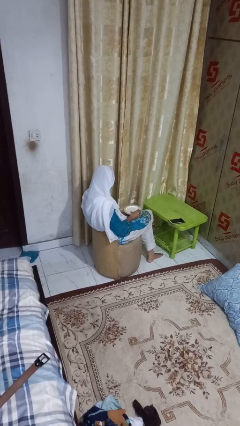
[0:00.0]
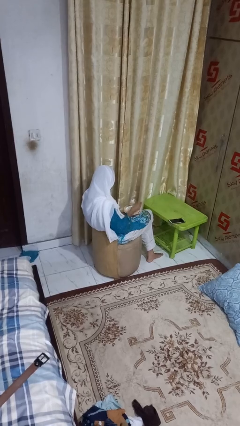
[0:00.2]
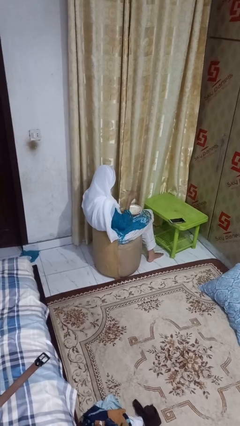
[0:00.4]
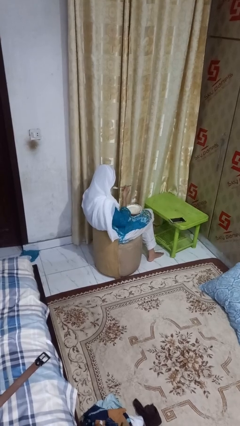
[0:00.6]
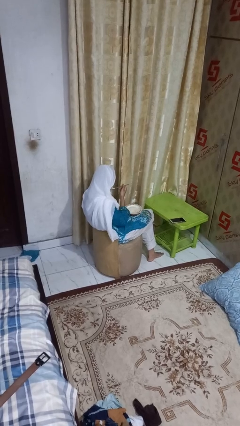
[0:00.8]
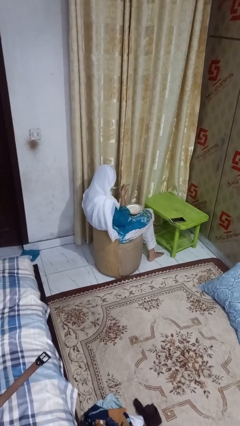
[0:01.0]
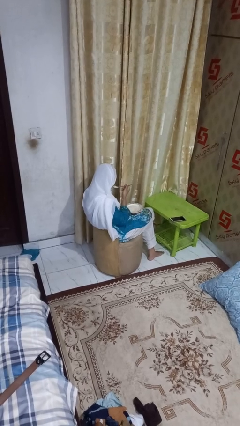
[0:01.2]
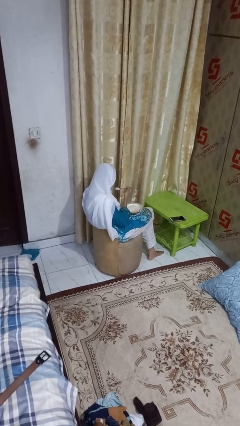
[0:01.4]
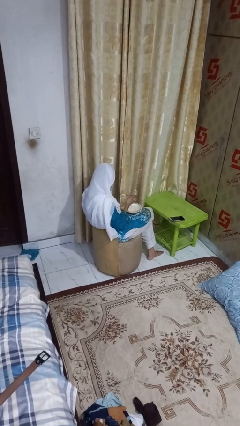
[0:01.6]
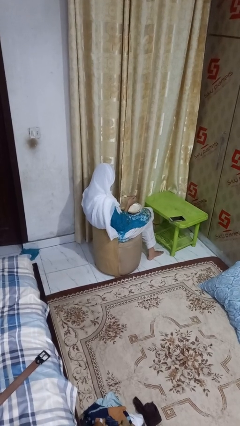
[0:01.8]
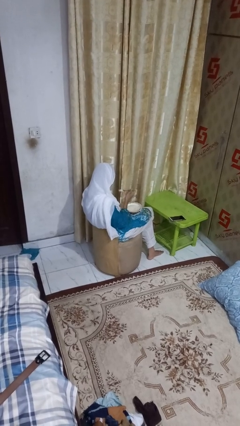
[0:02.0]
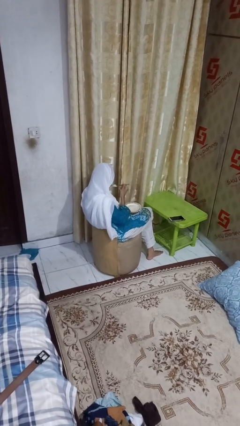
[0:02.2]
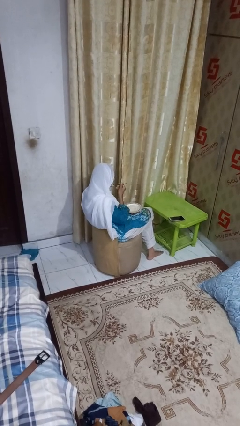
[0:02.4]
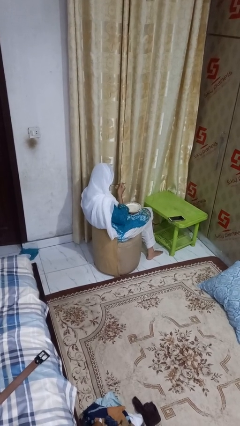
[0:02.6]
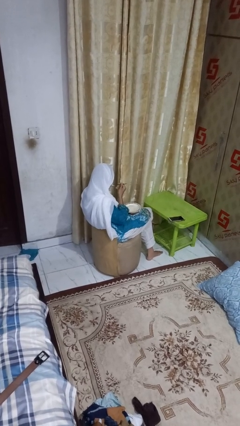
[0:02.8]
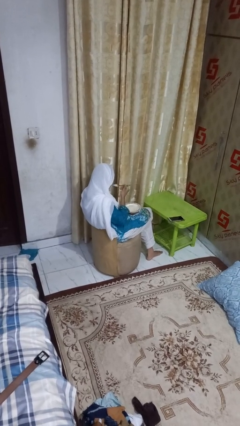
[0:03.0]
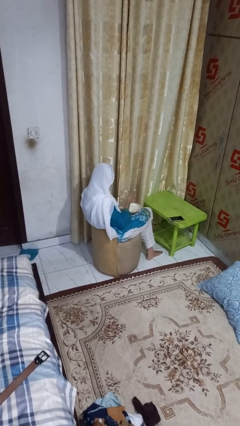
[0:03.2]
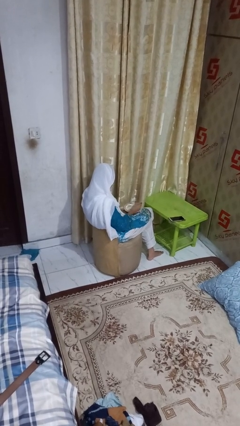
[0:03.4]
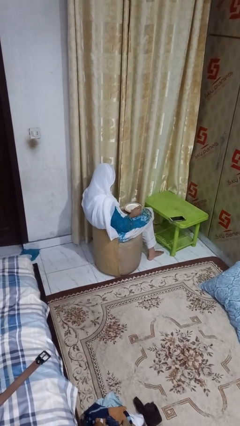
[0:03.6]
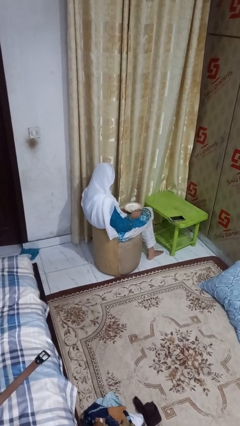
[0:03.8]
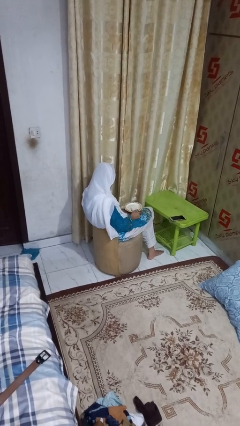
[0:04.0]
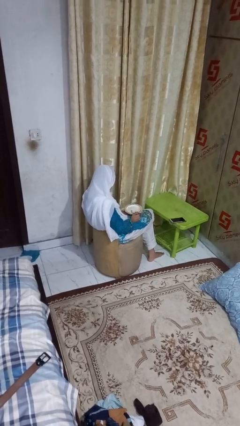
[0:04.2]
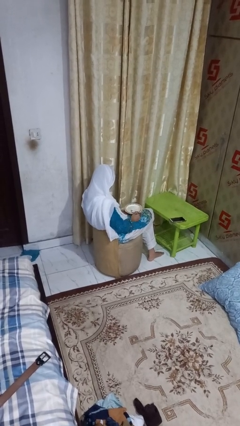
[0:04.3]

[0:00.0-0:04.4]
person eats with utensil

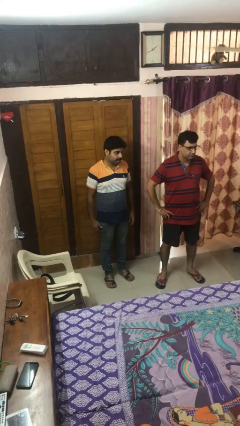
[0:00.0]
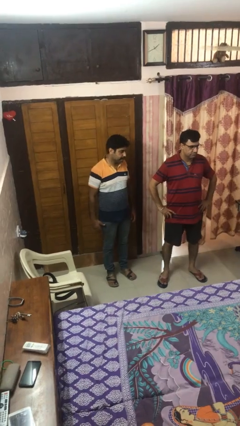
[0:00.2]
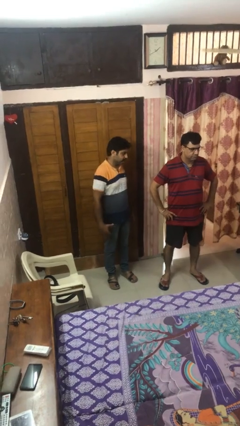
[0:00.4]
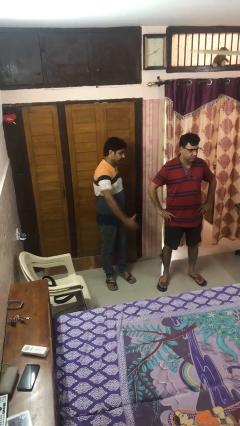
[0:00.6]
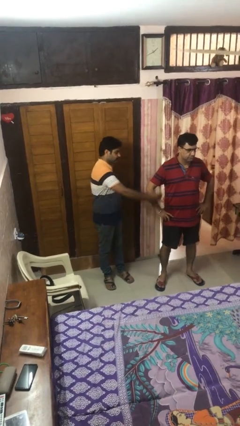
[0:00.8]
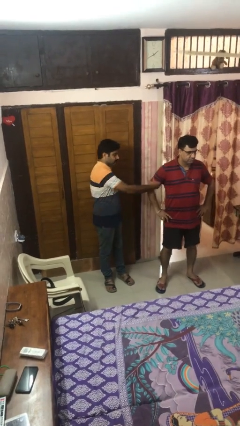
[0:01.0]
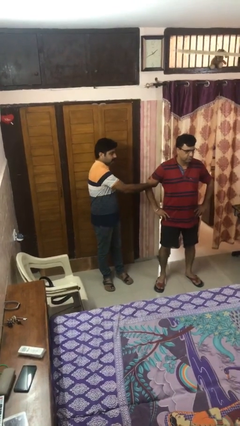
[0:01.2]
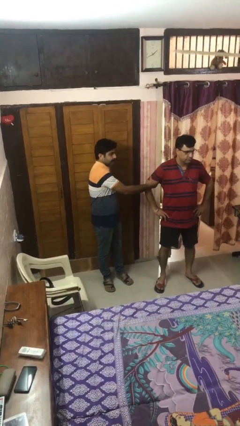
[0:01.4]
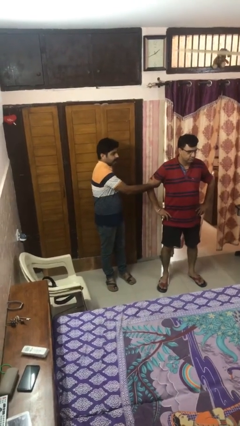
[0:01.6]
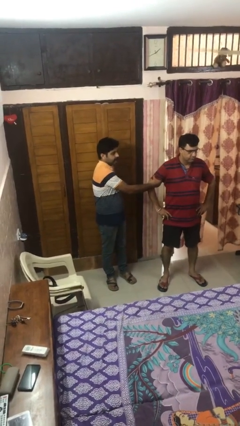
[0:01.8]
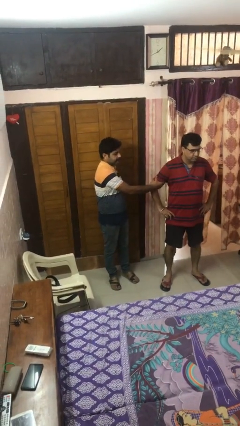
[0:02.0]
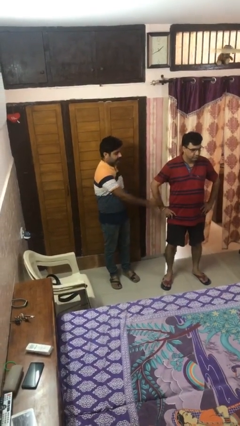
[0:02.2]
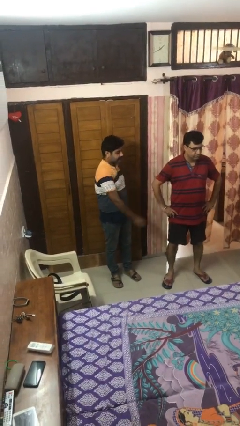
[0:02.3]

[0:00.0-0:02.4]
person grabs person by bicep

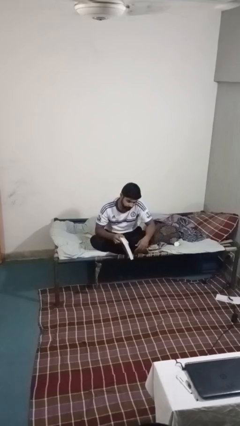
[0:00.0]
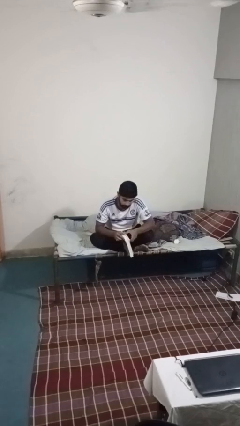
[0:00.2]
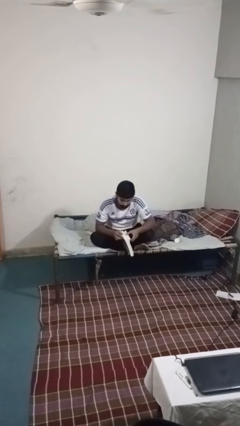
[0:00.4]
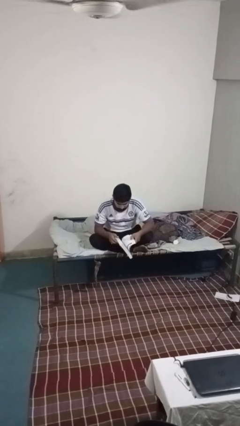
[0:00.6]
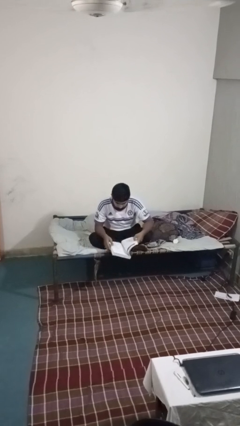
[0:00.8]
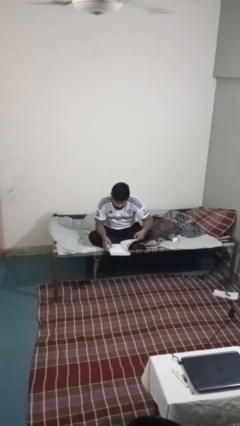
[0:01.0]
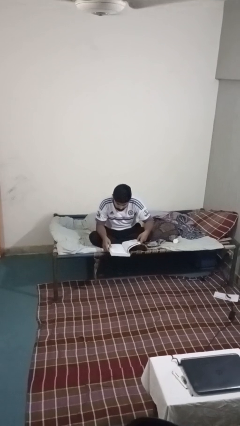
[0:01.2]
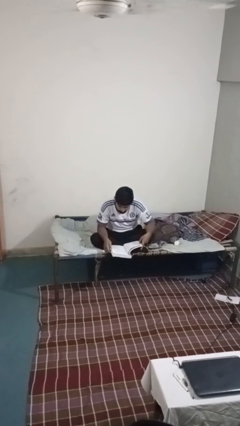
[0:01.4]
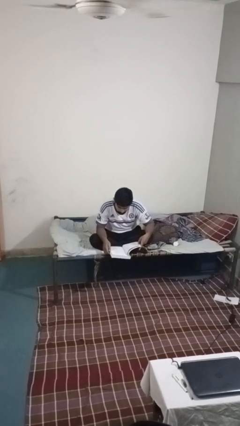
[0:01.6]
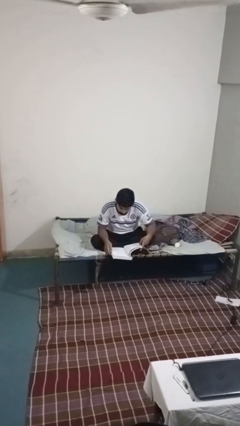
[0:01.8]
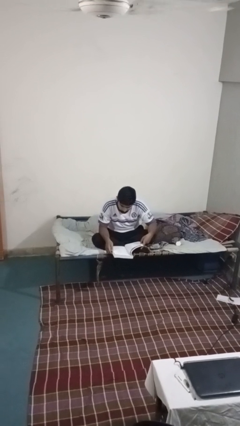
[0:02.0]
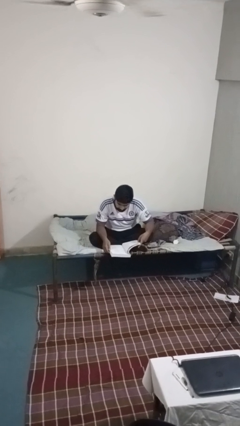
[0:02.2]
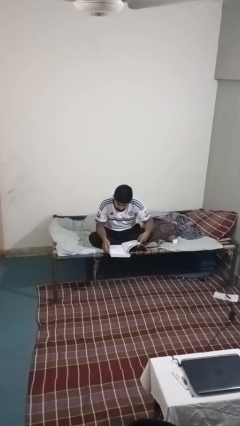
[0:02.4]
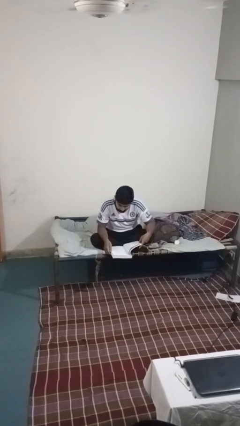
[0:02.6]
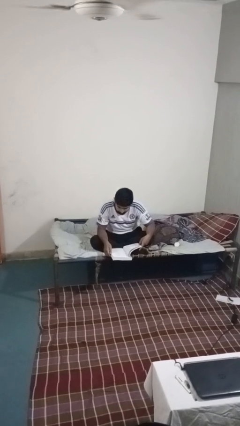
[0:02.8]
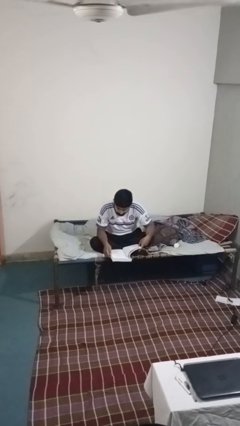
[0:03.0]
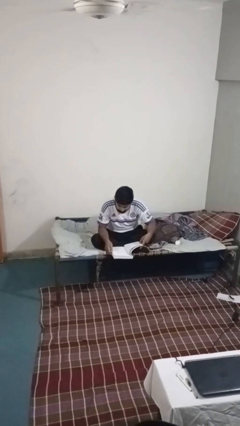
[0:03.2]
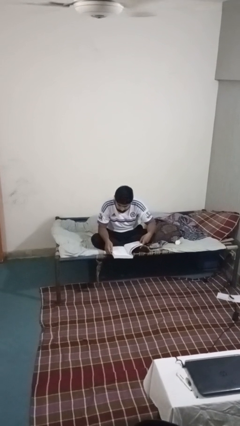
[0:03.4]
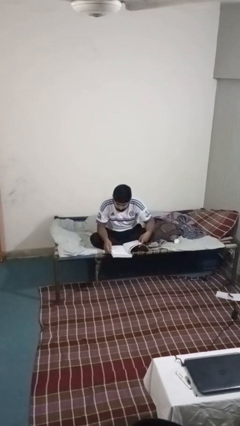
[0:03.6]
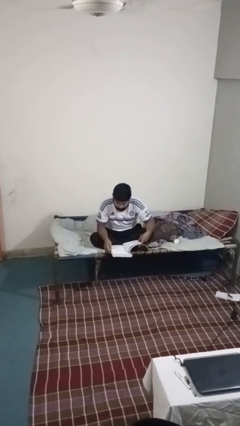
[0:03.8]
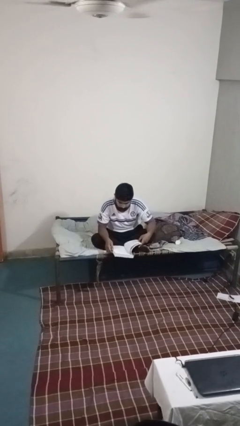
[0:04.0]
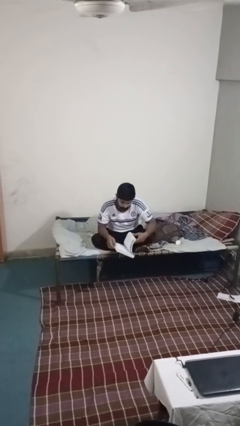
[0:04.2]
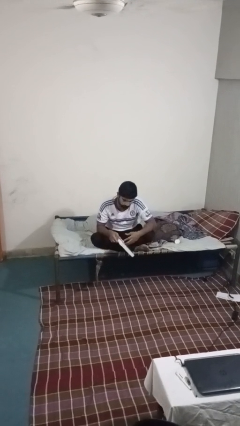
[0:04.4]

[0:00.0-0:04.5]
person reads book

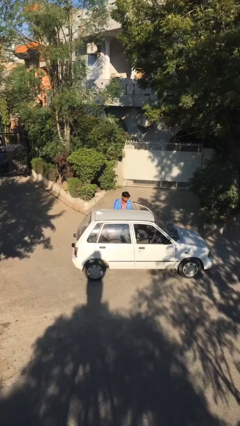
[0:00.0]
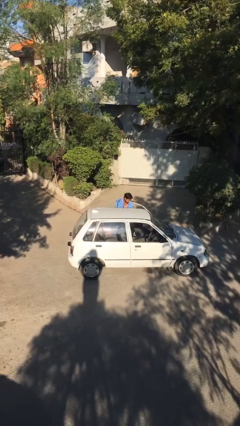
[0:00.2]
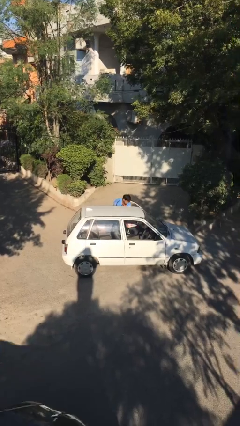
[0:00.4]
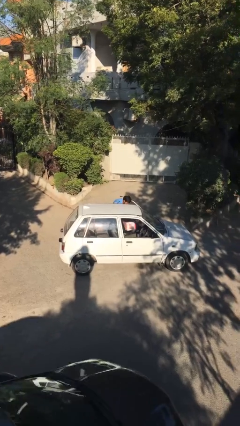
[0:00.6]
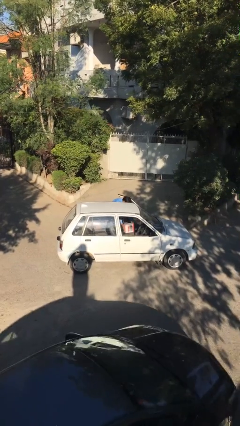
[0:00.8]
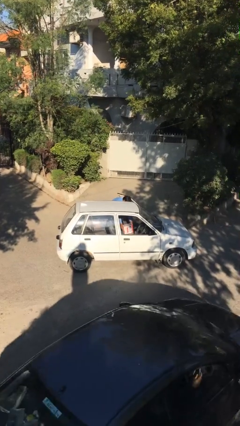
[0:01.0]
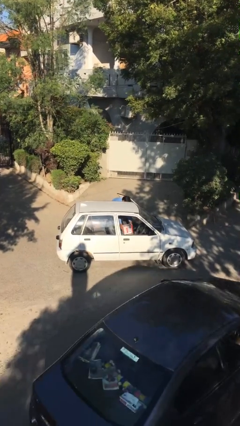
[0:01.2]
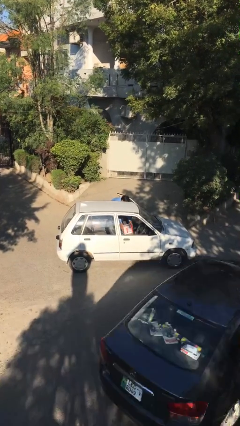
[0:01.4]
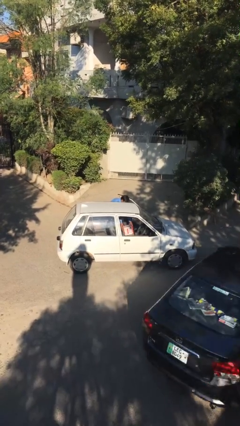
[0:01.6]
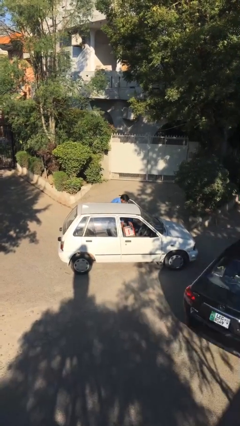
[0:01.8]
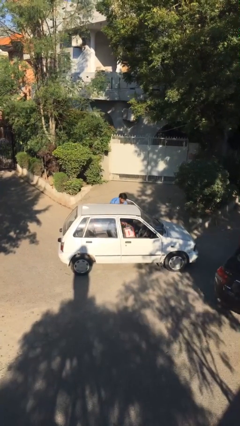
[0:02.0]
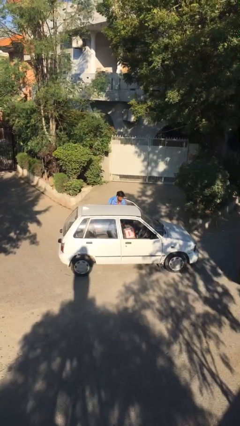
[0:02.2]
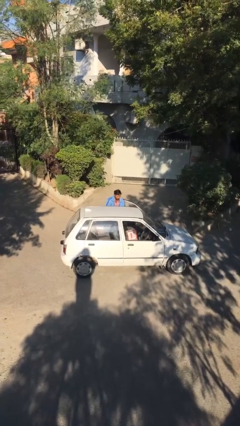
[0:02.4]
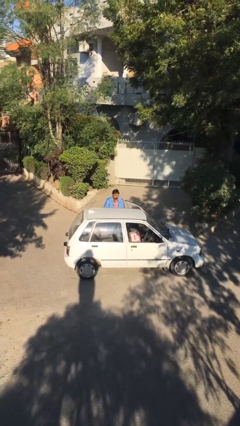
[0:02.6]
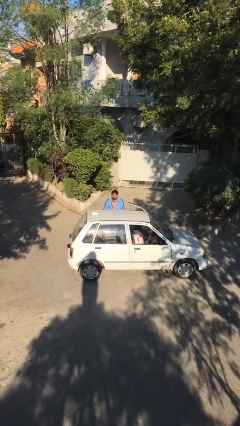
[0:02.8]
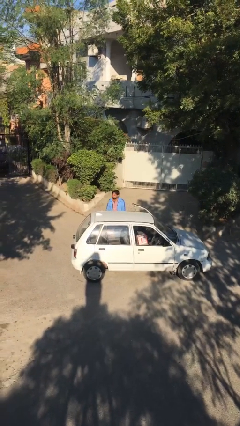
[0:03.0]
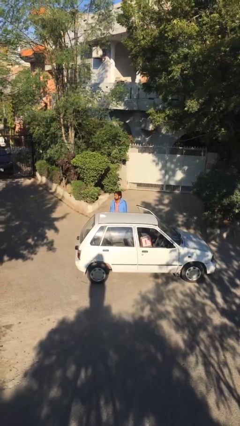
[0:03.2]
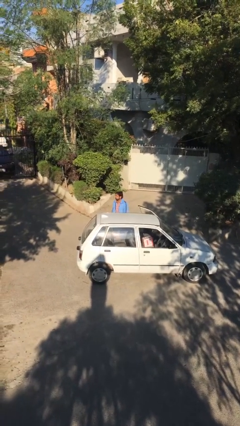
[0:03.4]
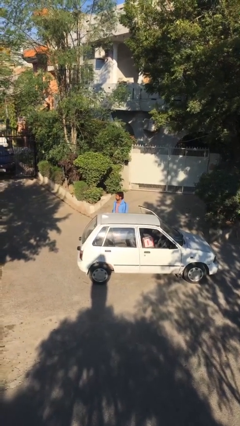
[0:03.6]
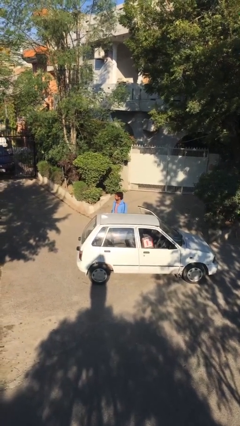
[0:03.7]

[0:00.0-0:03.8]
person loads car

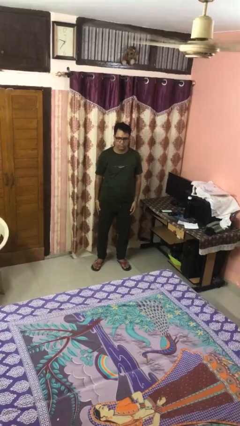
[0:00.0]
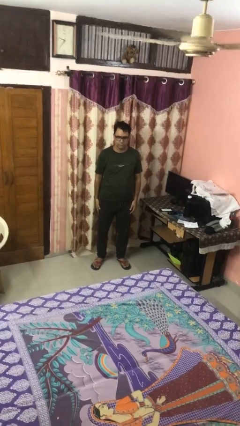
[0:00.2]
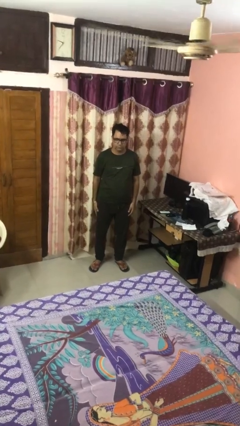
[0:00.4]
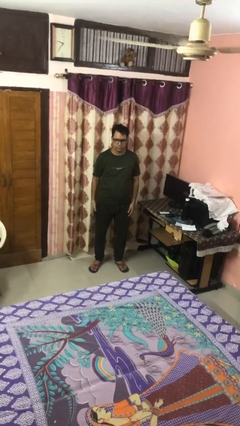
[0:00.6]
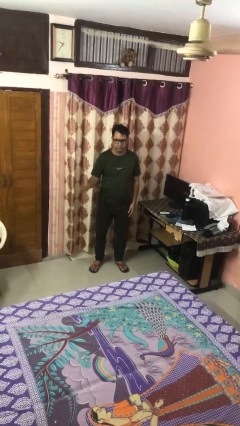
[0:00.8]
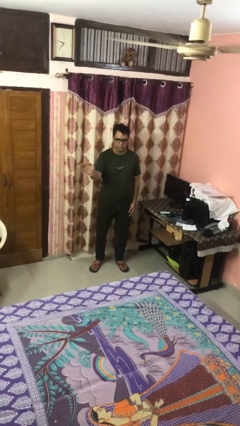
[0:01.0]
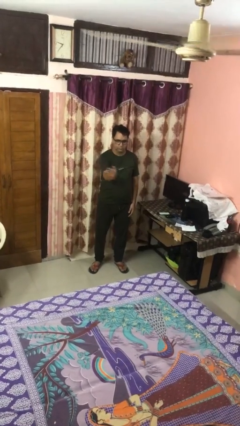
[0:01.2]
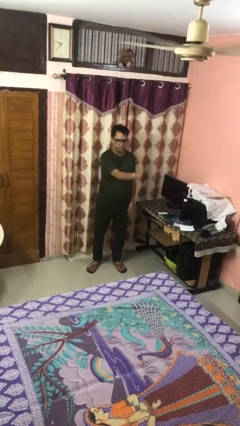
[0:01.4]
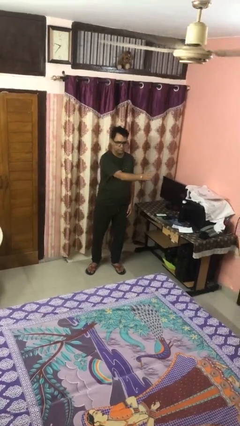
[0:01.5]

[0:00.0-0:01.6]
person gestures swipe left

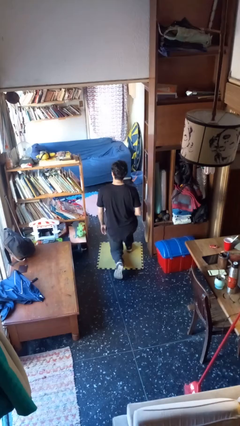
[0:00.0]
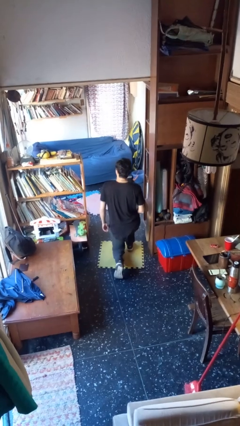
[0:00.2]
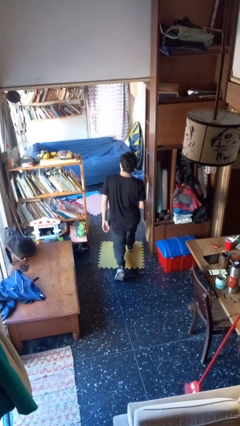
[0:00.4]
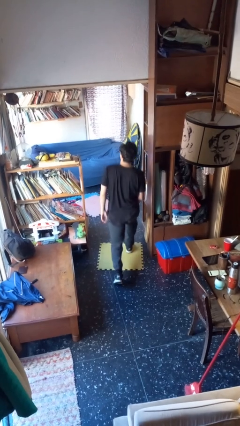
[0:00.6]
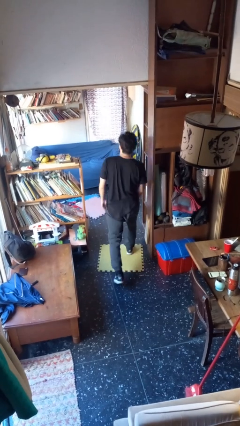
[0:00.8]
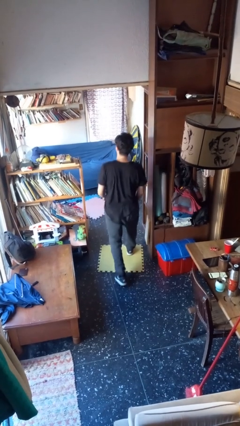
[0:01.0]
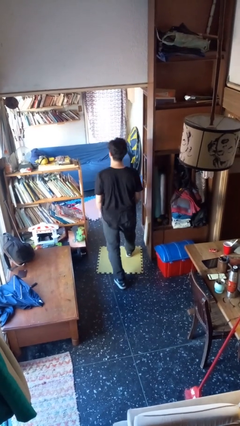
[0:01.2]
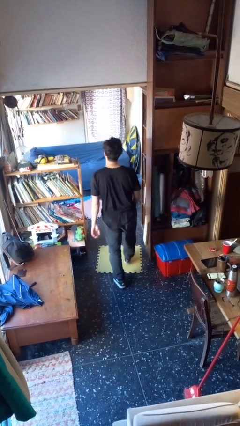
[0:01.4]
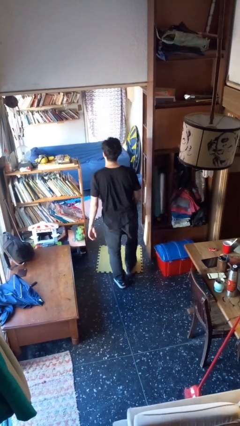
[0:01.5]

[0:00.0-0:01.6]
person stands up from floor
